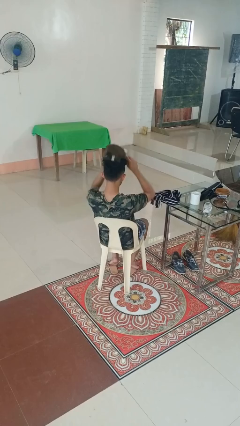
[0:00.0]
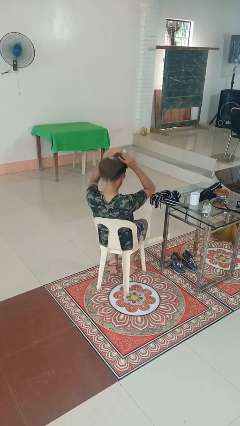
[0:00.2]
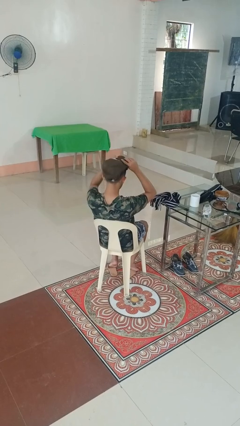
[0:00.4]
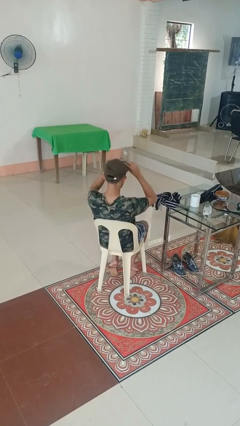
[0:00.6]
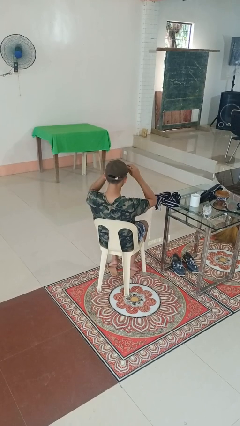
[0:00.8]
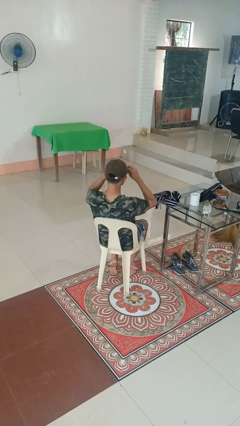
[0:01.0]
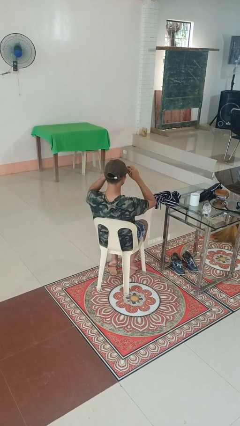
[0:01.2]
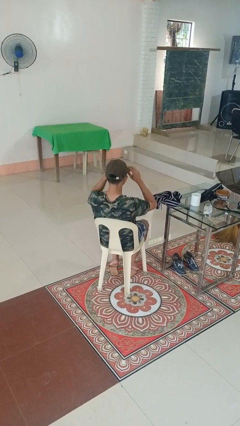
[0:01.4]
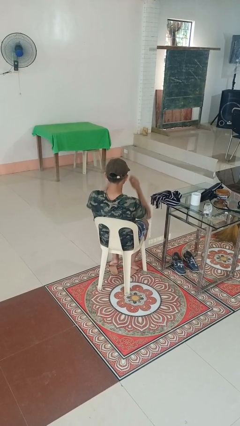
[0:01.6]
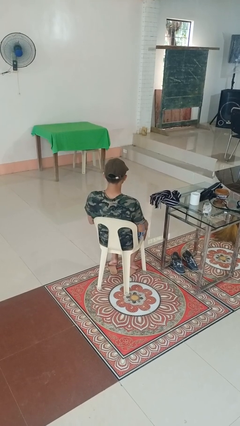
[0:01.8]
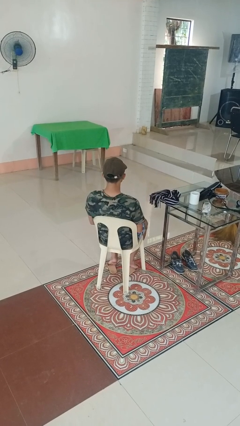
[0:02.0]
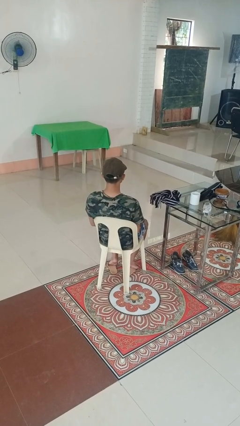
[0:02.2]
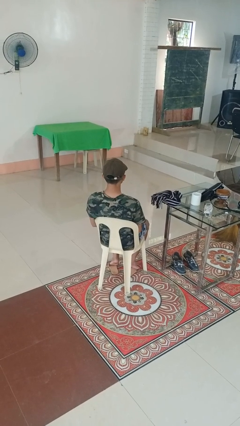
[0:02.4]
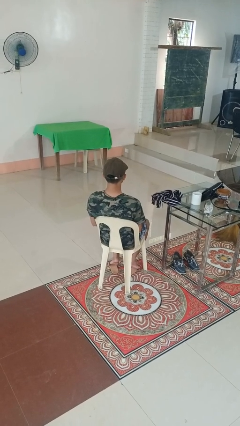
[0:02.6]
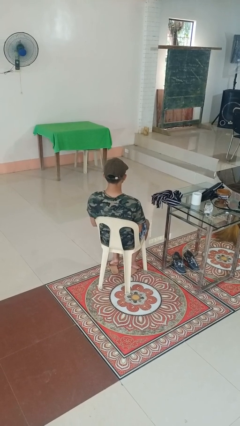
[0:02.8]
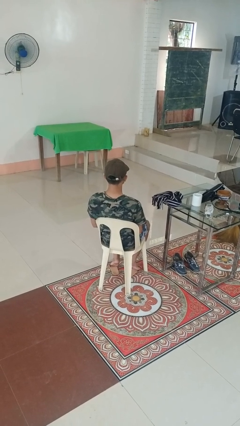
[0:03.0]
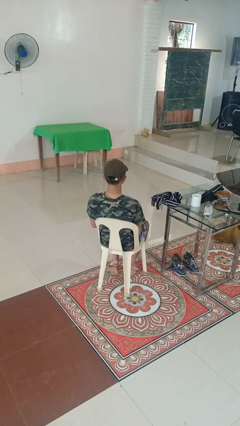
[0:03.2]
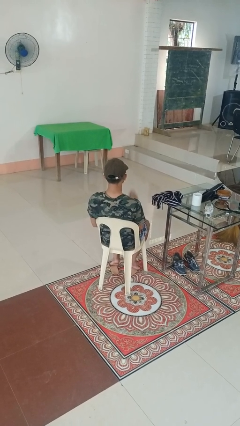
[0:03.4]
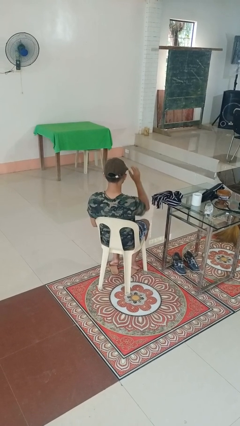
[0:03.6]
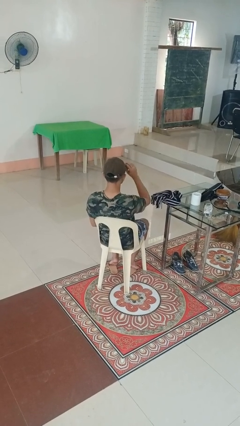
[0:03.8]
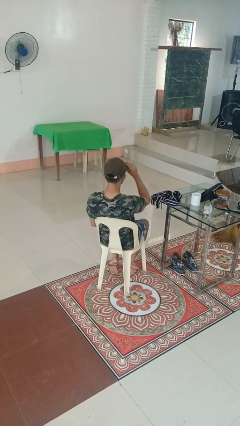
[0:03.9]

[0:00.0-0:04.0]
person puts on hat

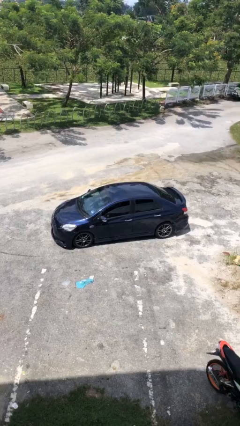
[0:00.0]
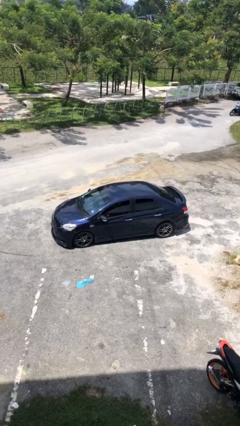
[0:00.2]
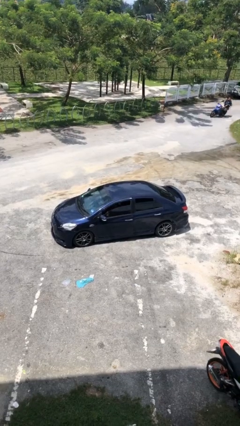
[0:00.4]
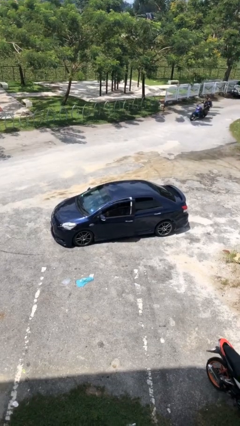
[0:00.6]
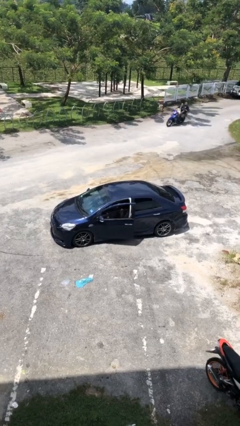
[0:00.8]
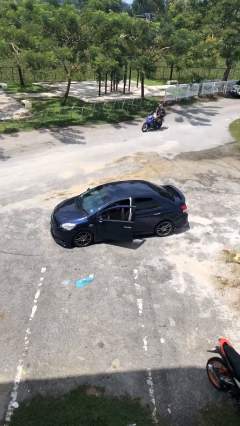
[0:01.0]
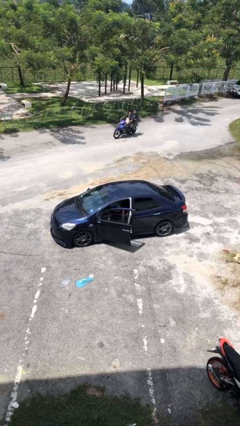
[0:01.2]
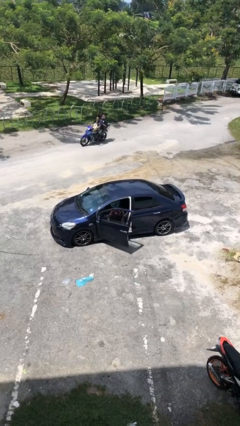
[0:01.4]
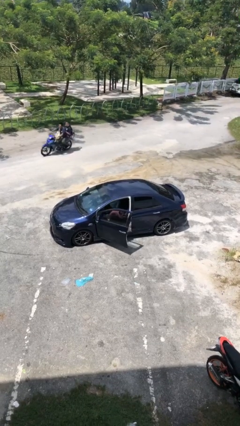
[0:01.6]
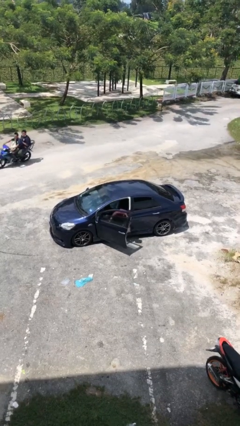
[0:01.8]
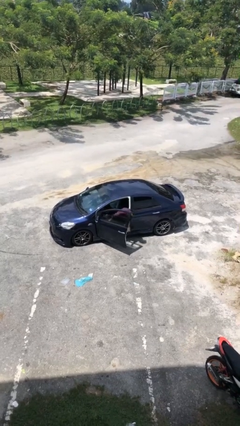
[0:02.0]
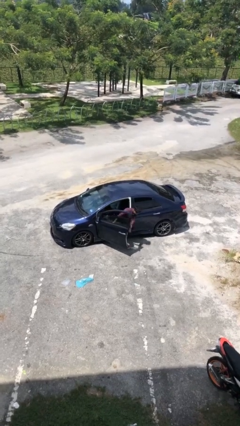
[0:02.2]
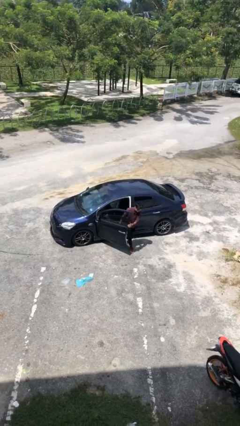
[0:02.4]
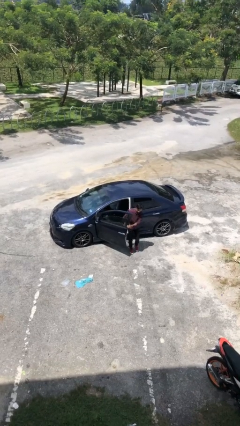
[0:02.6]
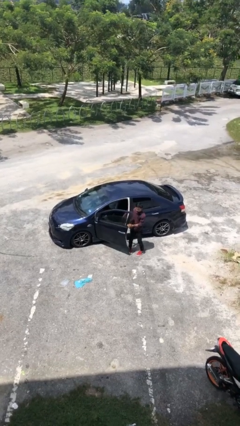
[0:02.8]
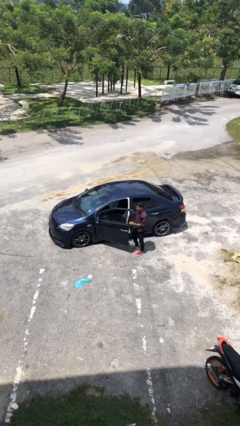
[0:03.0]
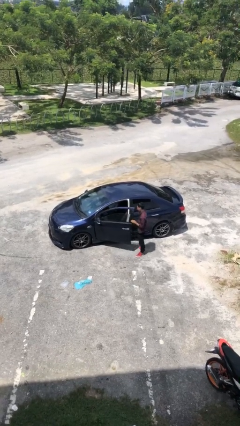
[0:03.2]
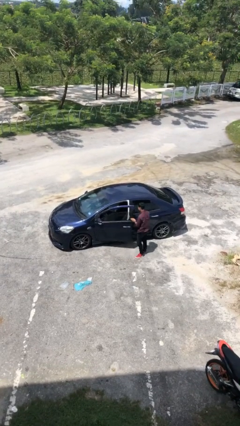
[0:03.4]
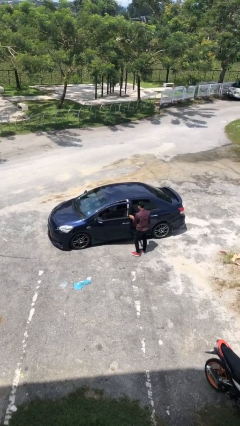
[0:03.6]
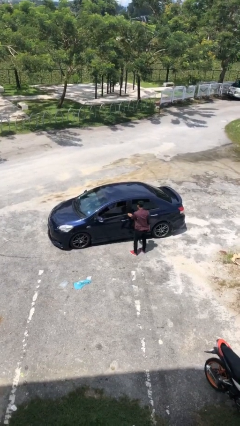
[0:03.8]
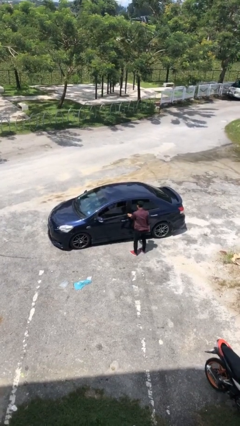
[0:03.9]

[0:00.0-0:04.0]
car drops off person

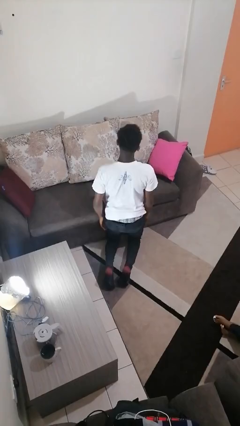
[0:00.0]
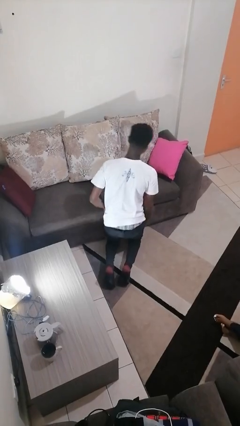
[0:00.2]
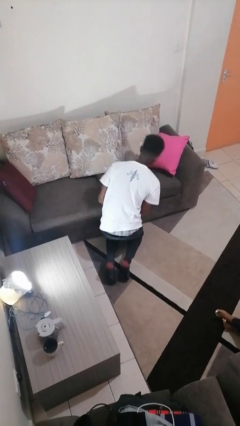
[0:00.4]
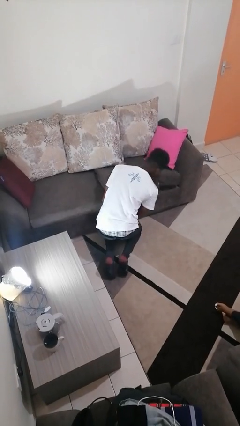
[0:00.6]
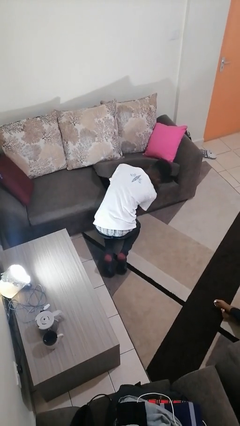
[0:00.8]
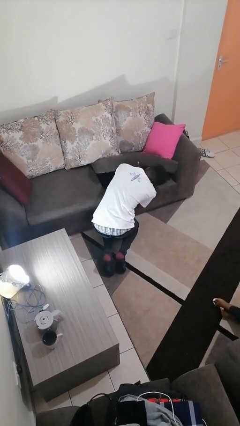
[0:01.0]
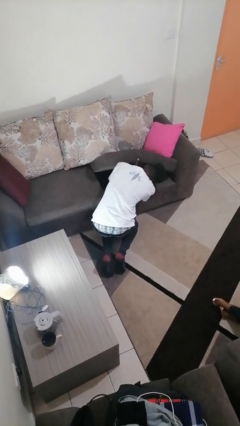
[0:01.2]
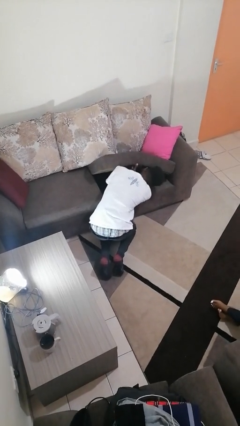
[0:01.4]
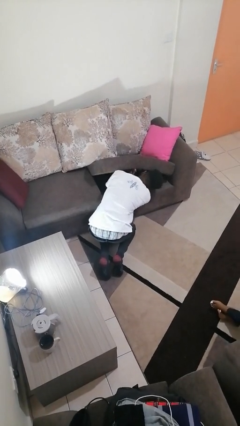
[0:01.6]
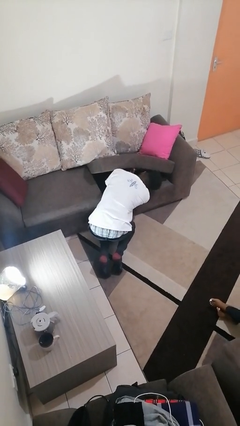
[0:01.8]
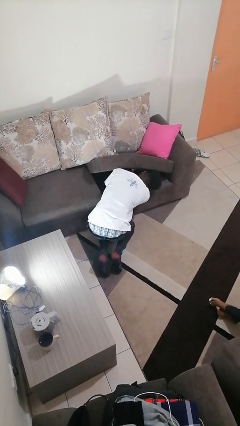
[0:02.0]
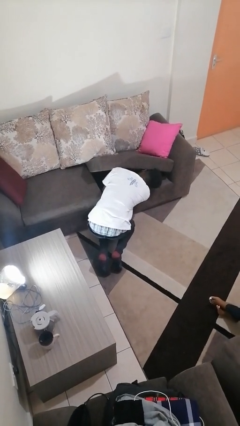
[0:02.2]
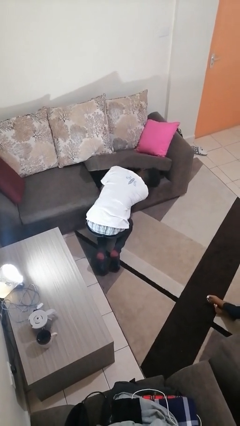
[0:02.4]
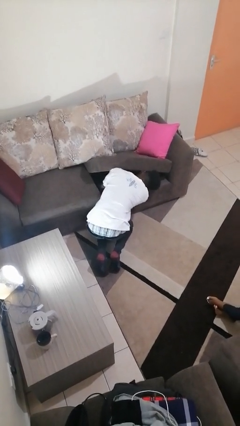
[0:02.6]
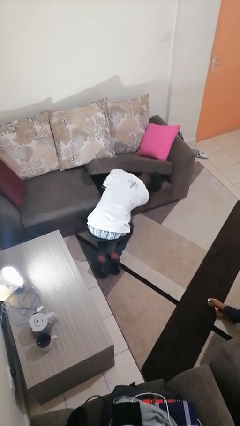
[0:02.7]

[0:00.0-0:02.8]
person searches under couch

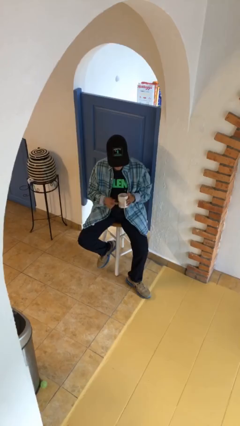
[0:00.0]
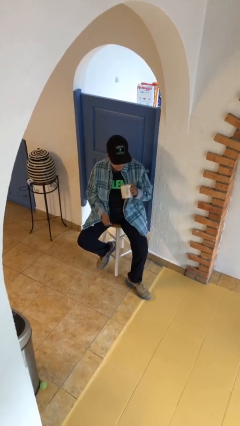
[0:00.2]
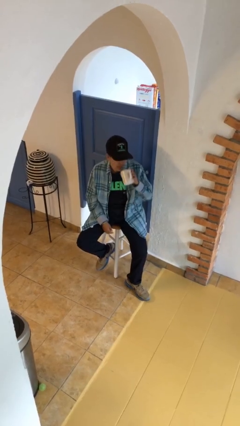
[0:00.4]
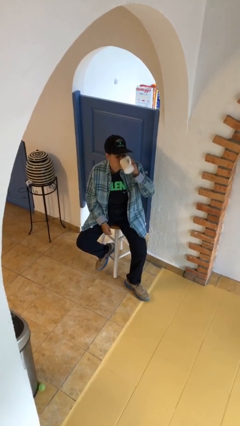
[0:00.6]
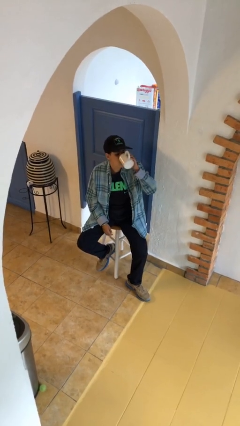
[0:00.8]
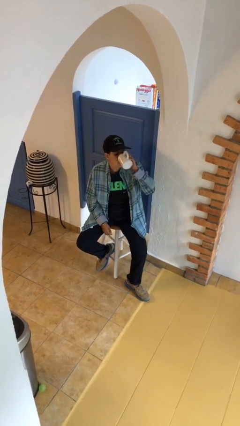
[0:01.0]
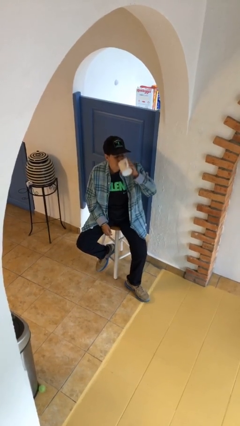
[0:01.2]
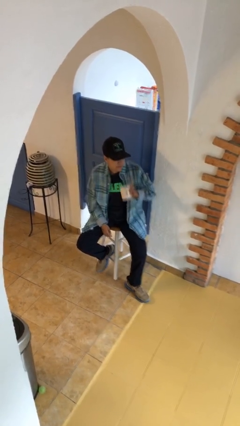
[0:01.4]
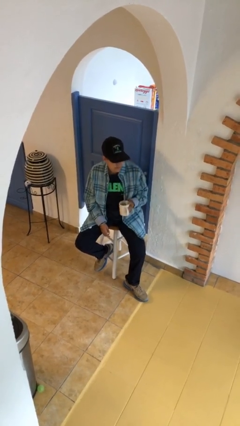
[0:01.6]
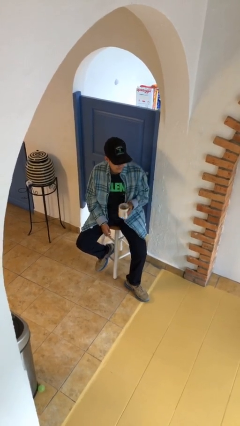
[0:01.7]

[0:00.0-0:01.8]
person drinks from mug

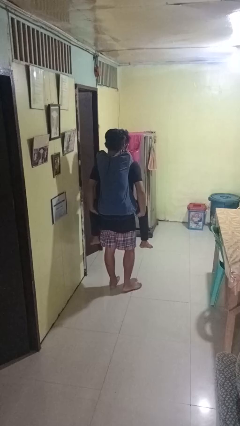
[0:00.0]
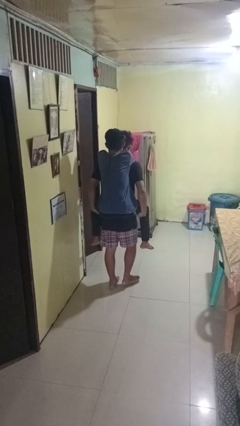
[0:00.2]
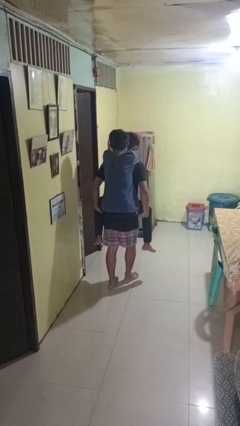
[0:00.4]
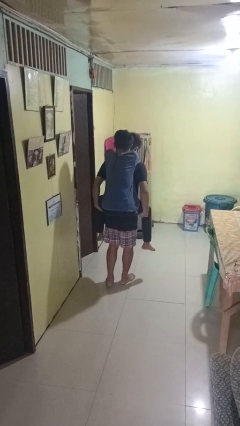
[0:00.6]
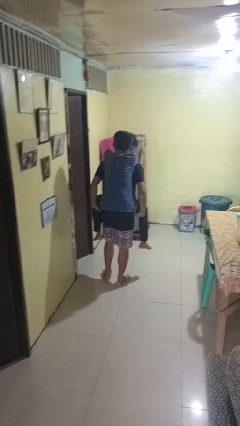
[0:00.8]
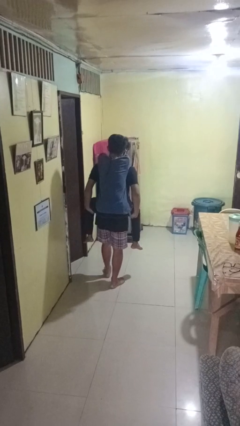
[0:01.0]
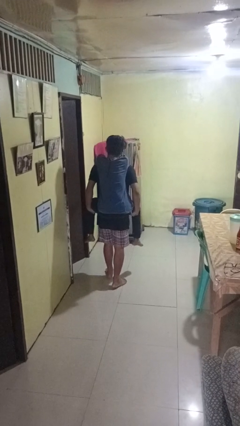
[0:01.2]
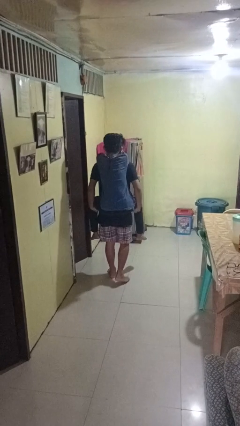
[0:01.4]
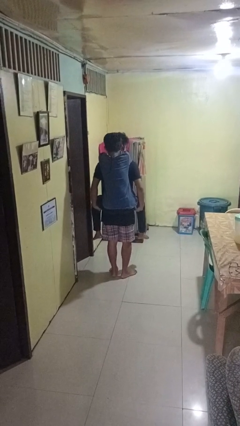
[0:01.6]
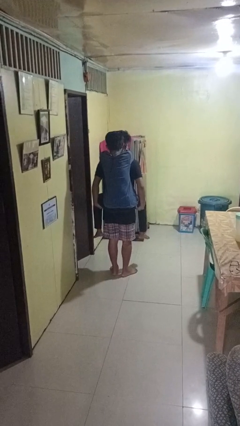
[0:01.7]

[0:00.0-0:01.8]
person carries person on back

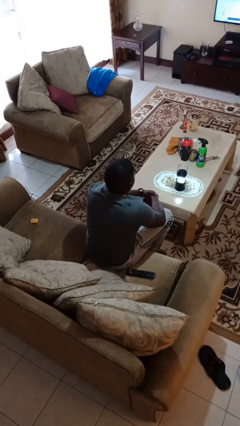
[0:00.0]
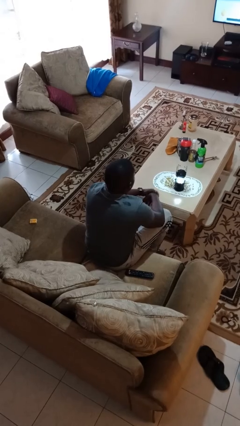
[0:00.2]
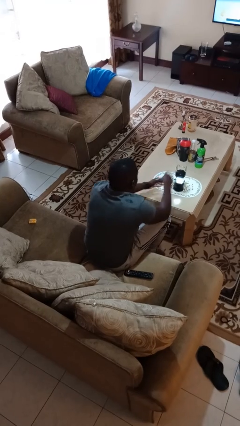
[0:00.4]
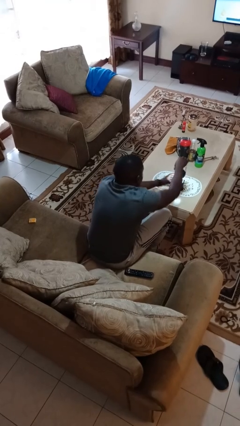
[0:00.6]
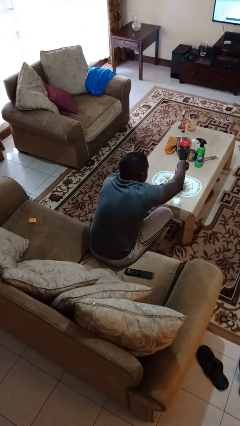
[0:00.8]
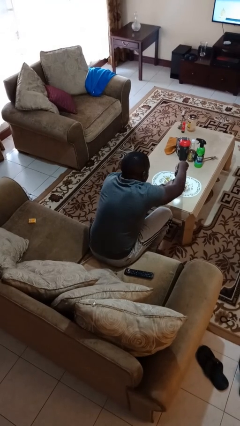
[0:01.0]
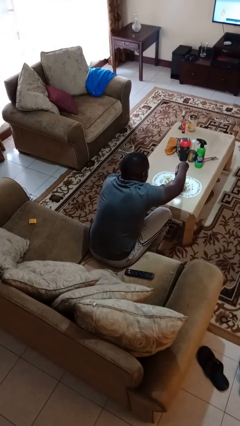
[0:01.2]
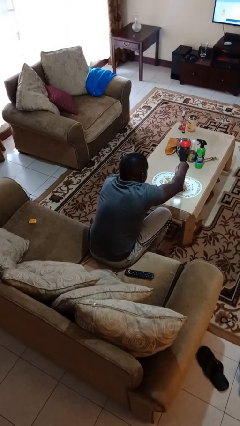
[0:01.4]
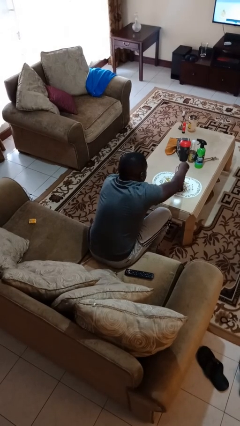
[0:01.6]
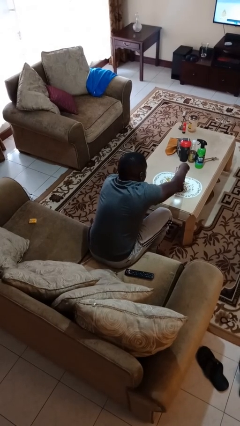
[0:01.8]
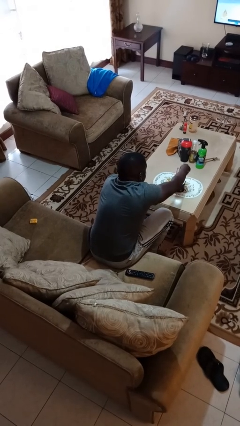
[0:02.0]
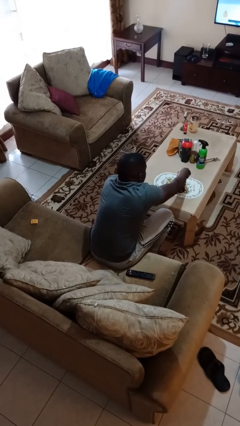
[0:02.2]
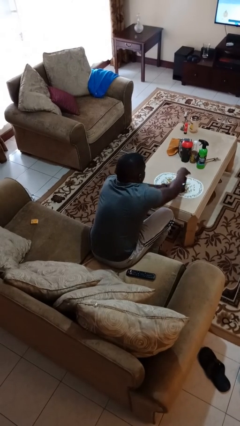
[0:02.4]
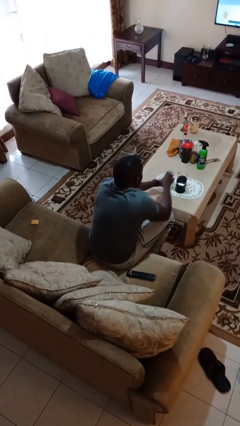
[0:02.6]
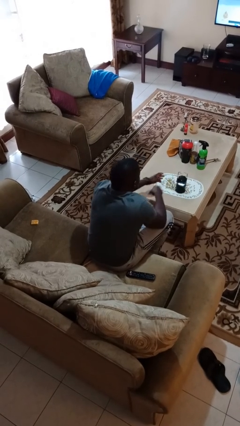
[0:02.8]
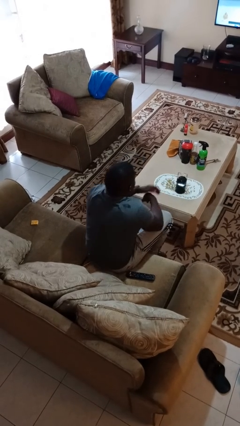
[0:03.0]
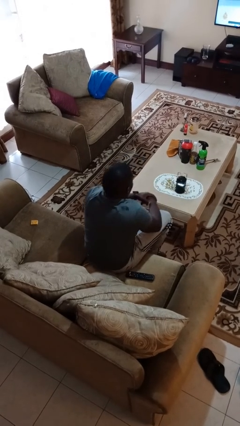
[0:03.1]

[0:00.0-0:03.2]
person turns off lamp

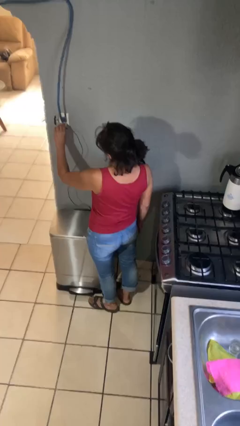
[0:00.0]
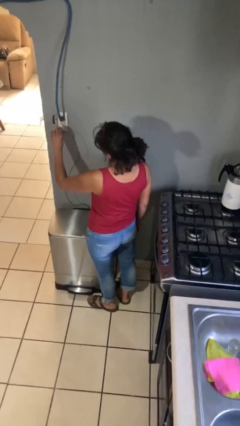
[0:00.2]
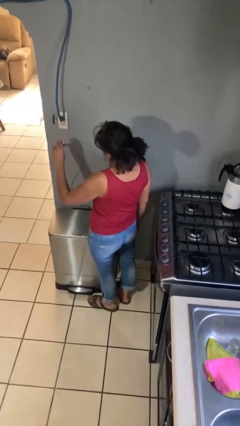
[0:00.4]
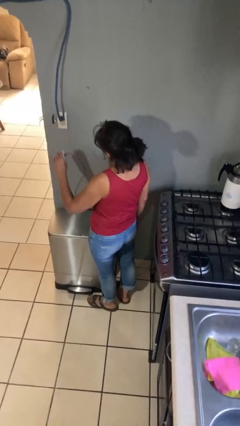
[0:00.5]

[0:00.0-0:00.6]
person unplugs from electrical socket
